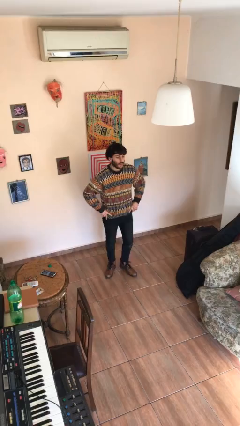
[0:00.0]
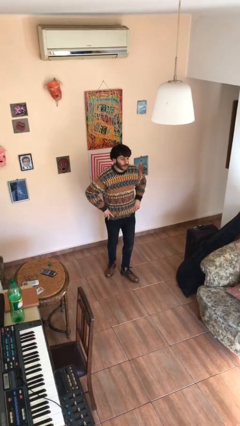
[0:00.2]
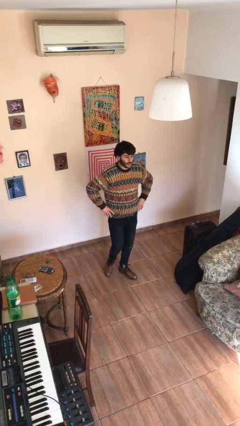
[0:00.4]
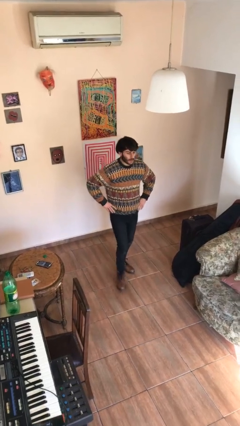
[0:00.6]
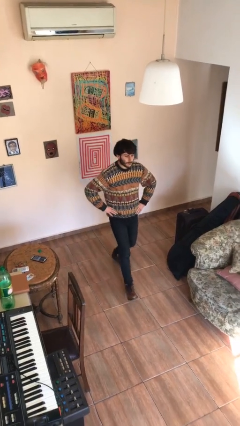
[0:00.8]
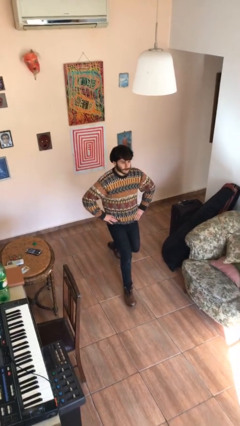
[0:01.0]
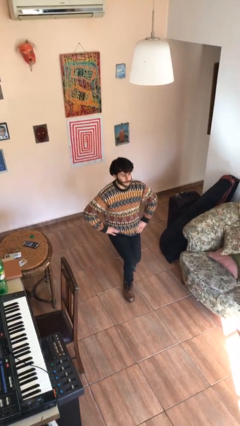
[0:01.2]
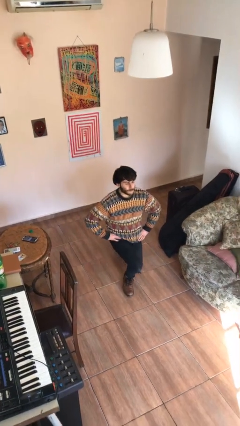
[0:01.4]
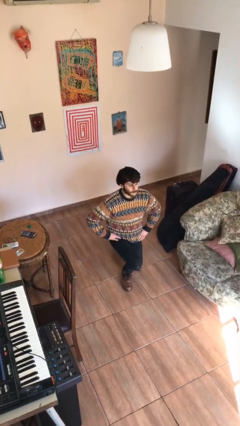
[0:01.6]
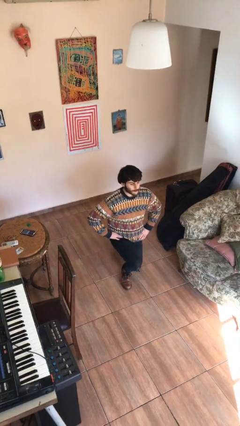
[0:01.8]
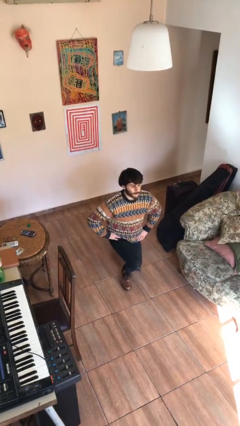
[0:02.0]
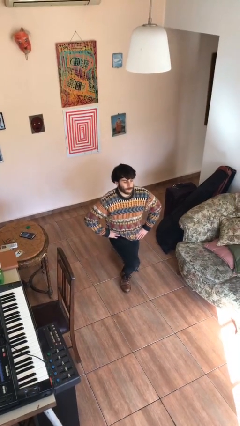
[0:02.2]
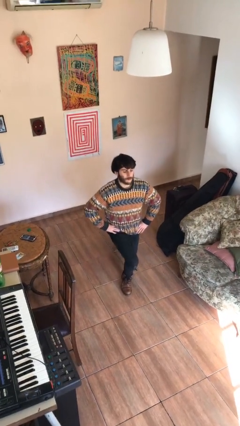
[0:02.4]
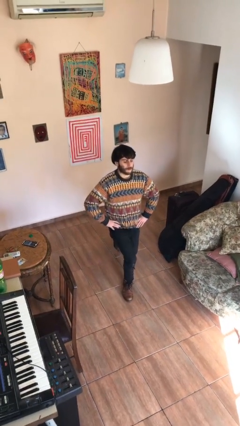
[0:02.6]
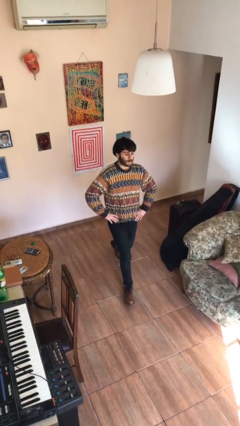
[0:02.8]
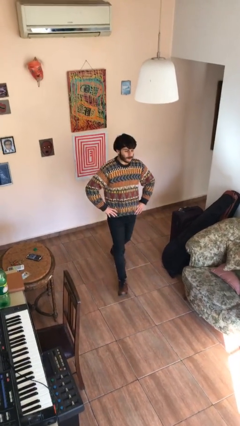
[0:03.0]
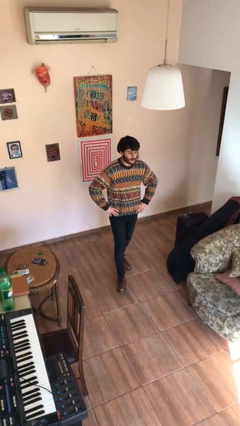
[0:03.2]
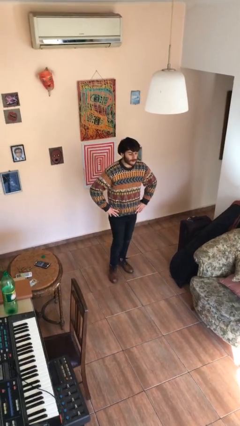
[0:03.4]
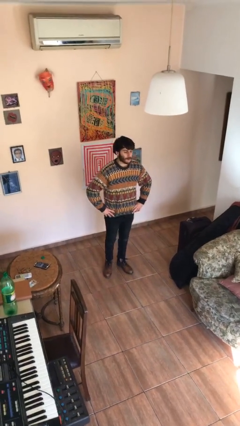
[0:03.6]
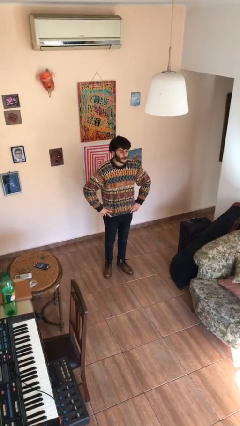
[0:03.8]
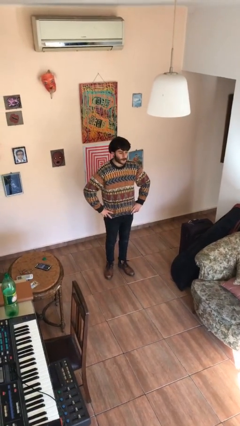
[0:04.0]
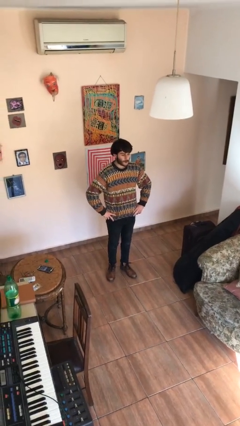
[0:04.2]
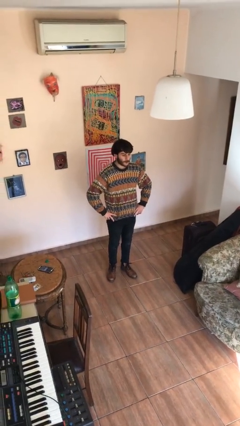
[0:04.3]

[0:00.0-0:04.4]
person exercises with lunges

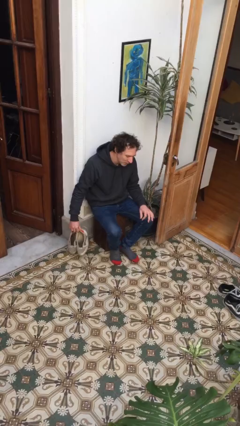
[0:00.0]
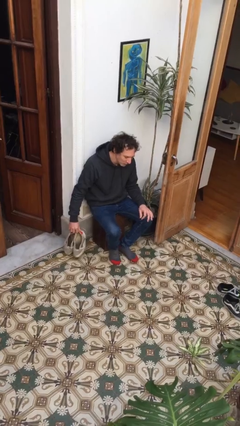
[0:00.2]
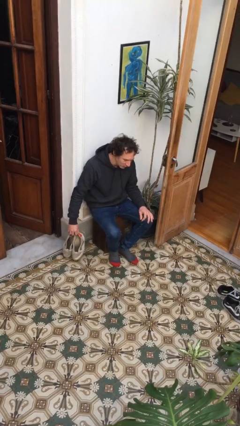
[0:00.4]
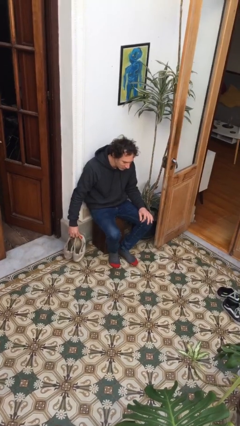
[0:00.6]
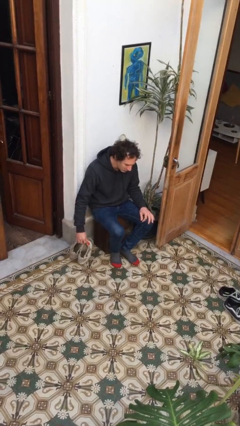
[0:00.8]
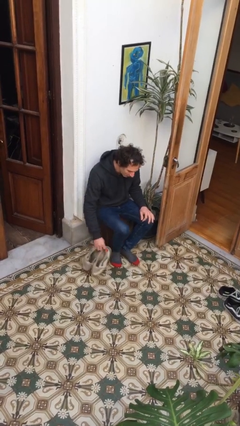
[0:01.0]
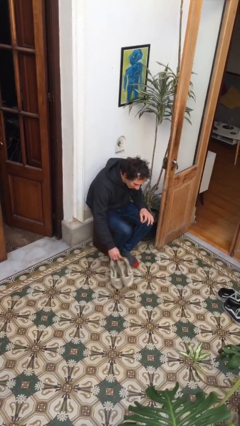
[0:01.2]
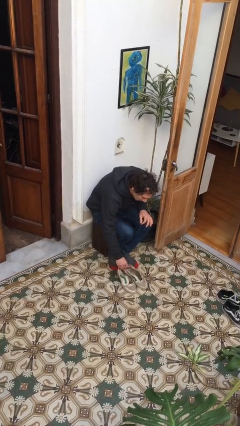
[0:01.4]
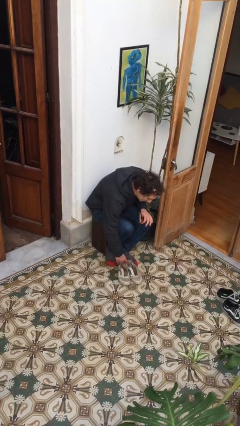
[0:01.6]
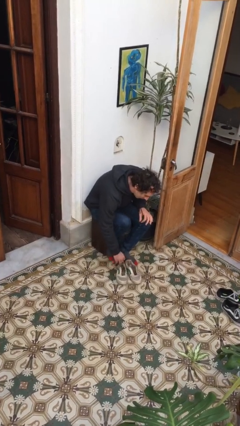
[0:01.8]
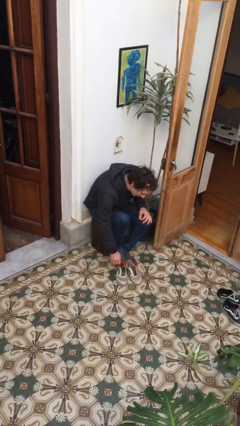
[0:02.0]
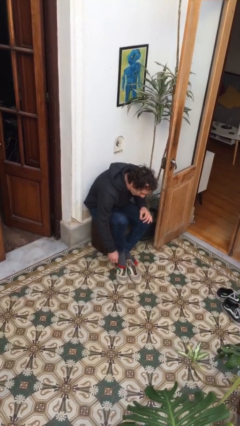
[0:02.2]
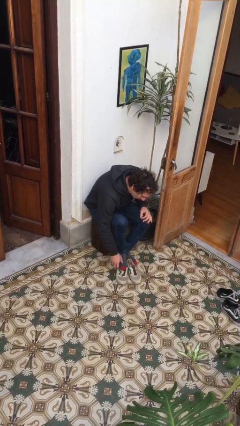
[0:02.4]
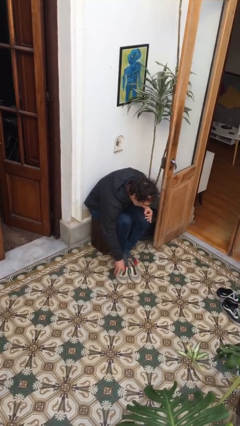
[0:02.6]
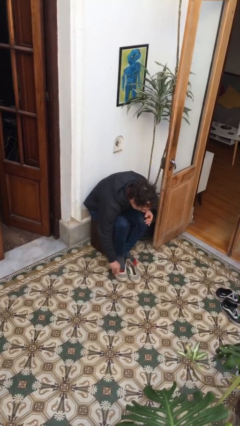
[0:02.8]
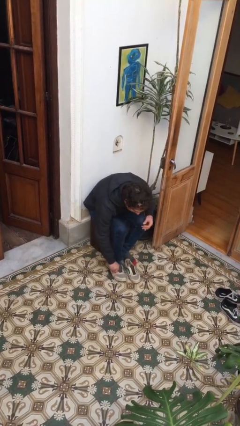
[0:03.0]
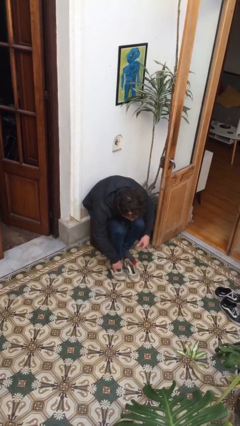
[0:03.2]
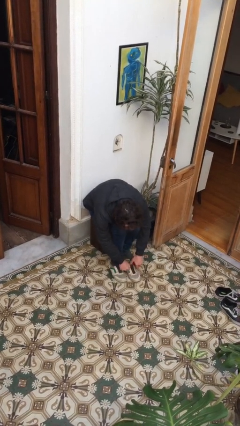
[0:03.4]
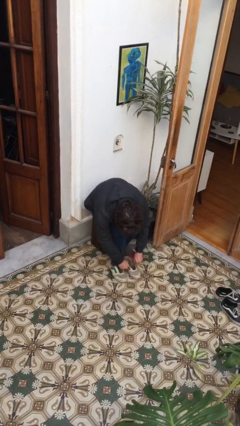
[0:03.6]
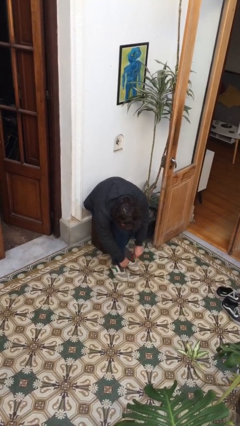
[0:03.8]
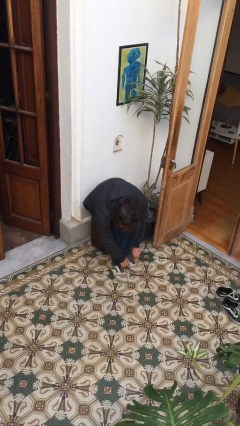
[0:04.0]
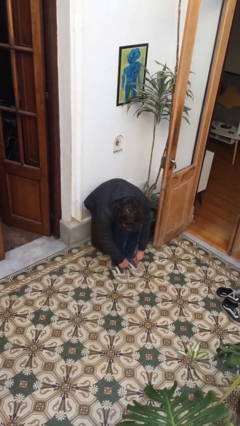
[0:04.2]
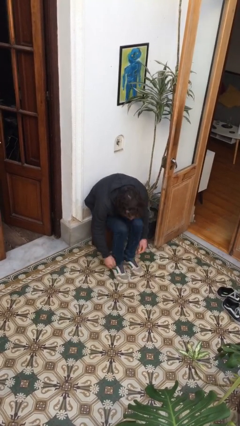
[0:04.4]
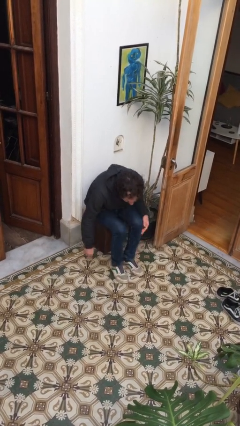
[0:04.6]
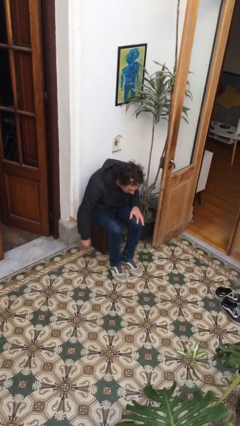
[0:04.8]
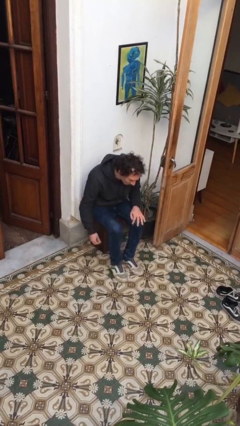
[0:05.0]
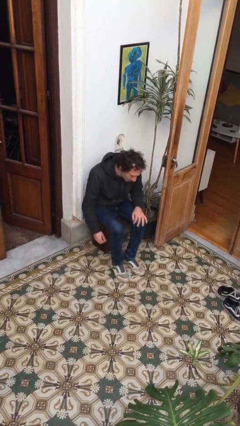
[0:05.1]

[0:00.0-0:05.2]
person puts on shoes

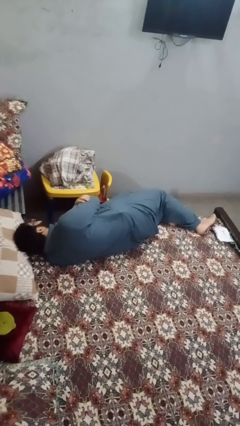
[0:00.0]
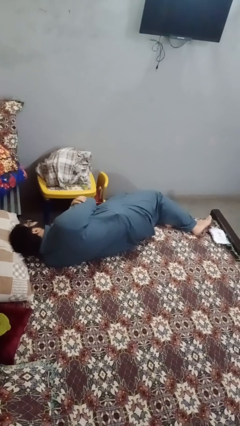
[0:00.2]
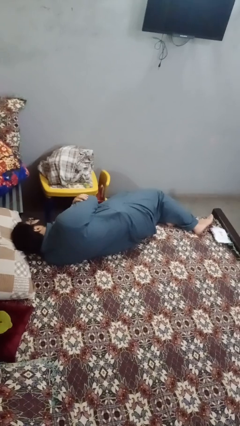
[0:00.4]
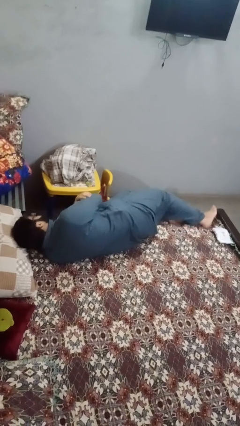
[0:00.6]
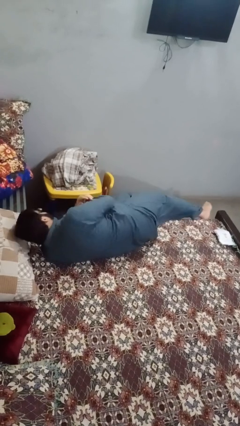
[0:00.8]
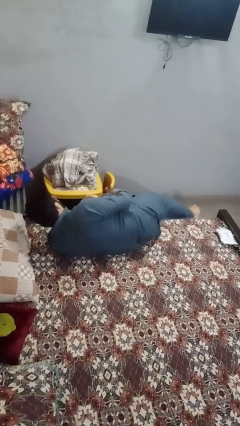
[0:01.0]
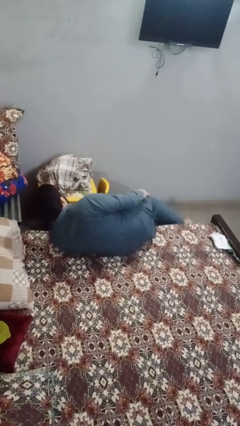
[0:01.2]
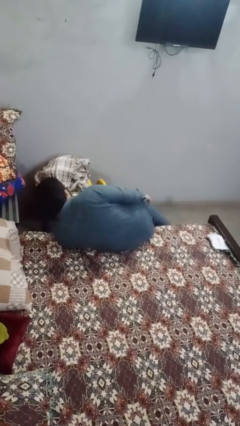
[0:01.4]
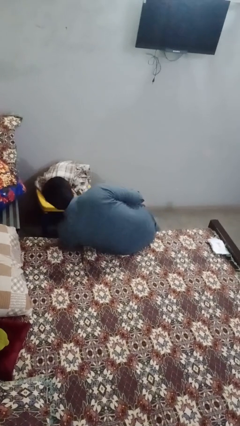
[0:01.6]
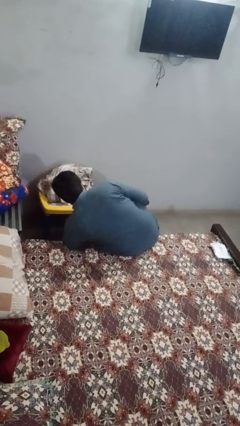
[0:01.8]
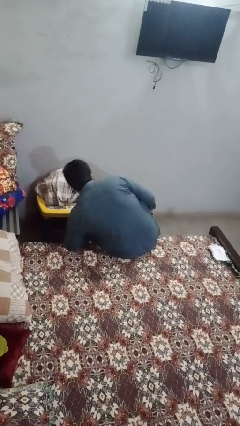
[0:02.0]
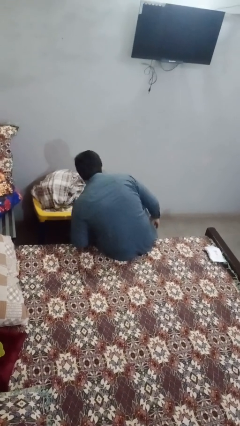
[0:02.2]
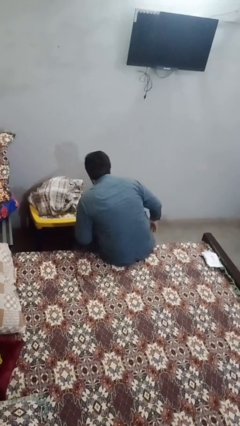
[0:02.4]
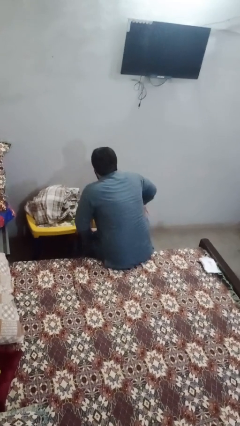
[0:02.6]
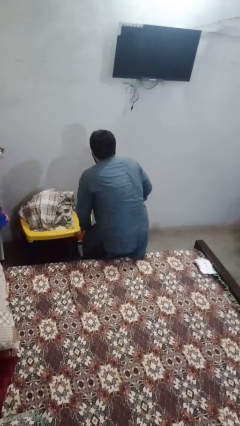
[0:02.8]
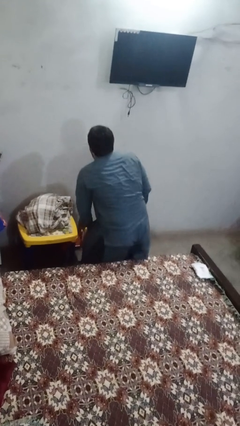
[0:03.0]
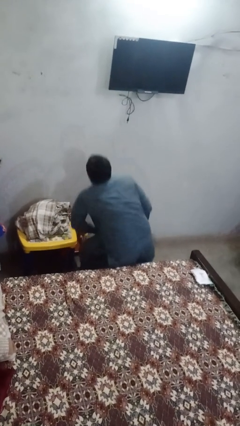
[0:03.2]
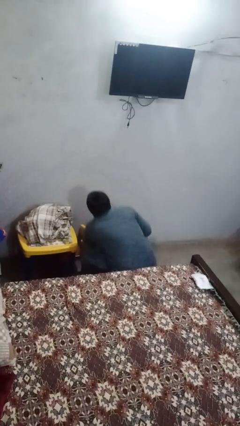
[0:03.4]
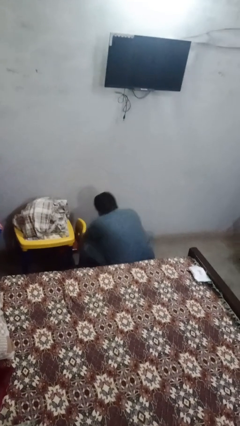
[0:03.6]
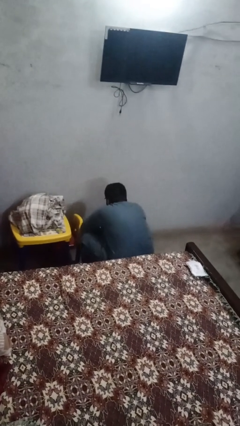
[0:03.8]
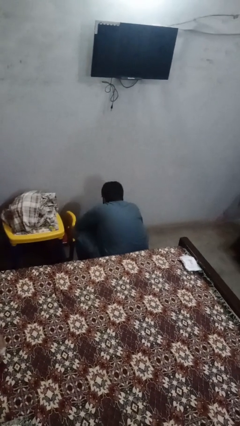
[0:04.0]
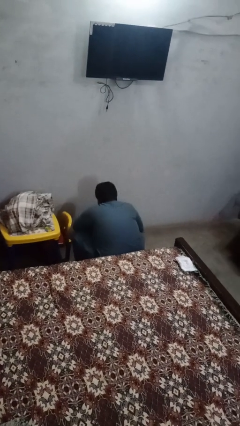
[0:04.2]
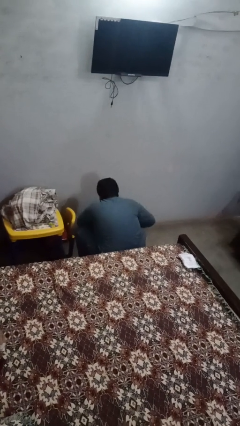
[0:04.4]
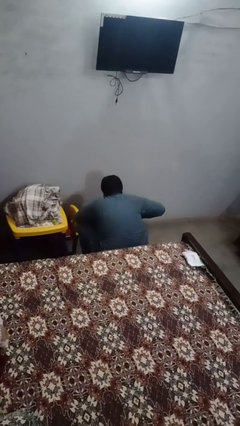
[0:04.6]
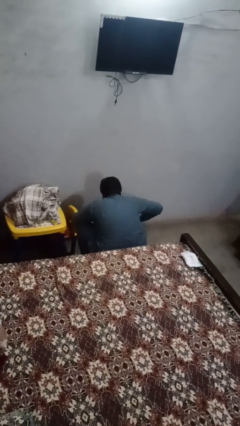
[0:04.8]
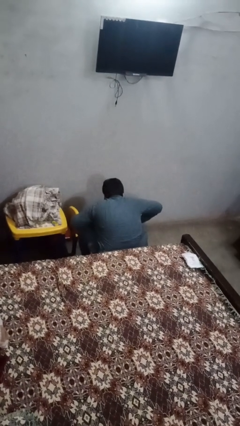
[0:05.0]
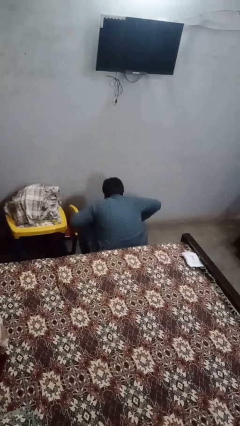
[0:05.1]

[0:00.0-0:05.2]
person falls from bed

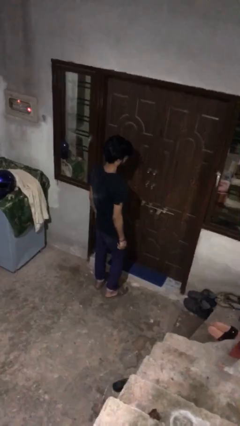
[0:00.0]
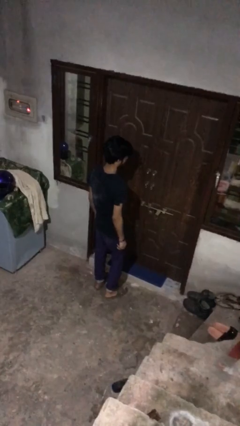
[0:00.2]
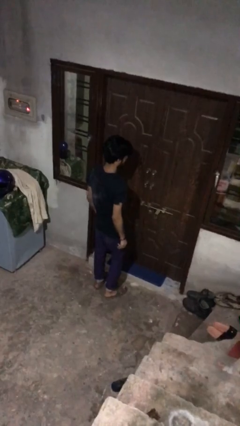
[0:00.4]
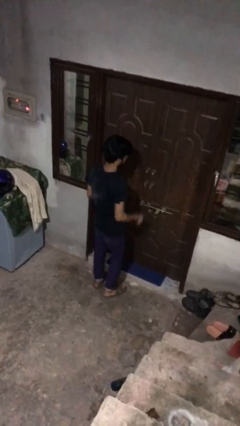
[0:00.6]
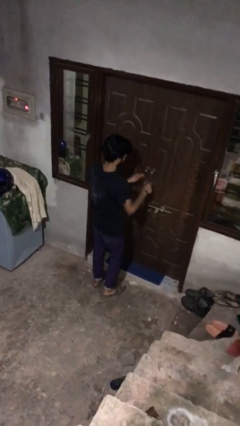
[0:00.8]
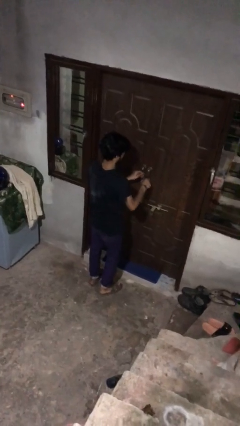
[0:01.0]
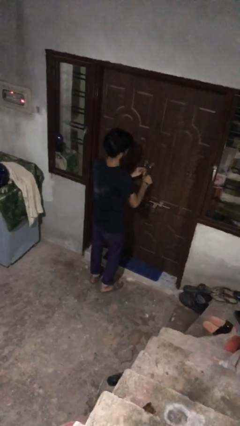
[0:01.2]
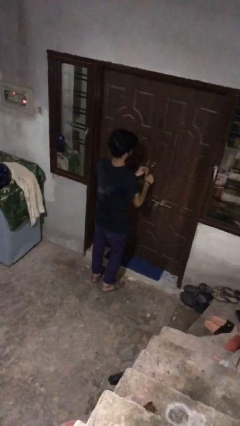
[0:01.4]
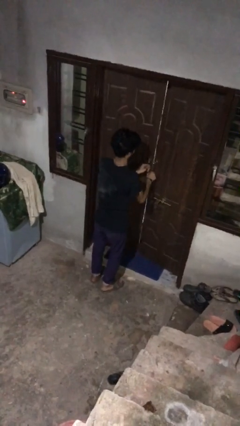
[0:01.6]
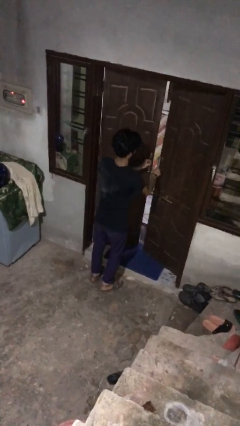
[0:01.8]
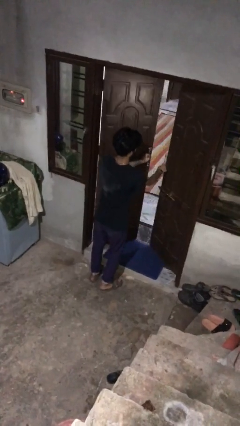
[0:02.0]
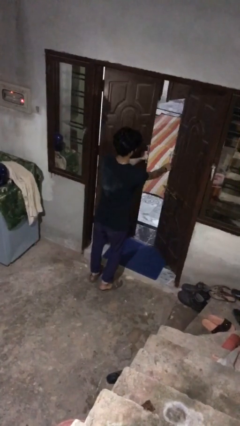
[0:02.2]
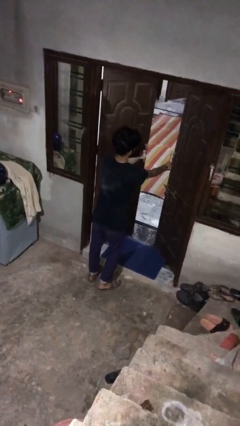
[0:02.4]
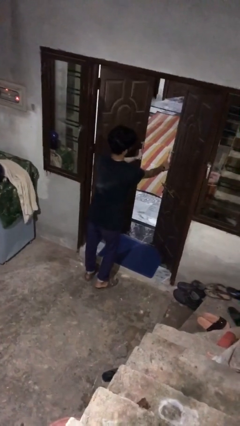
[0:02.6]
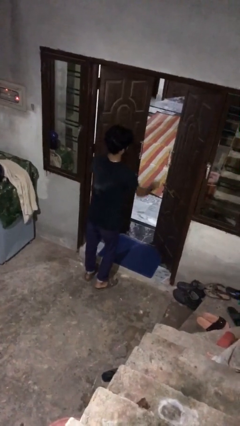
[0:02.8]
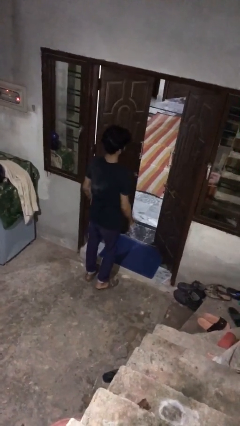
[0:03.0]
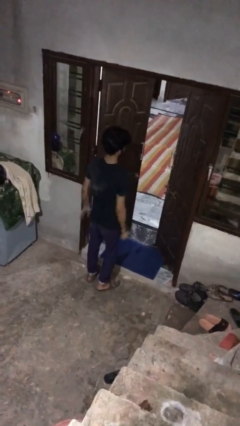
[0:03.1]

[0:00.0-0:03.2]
person opens facility door
